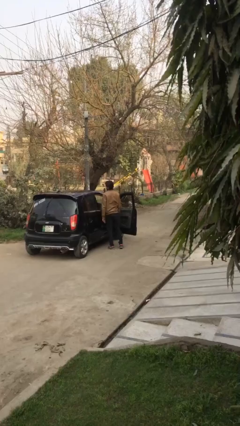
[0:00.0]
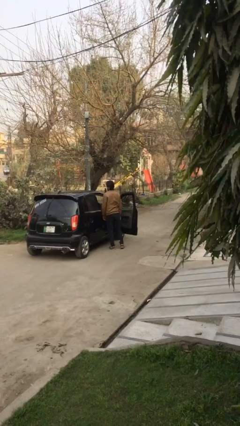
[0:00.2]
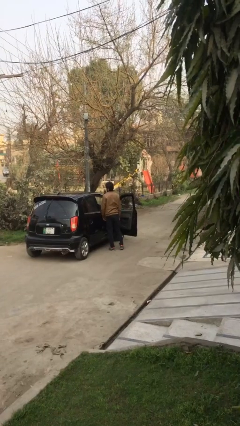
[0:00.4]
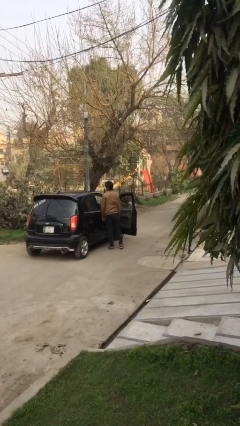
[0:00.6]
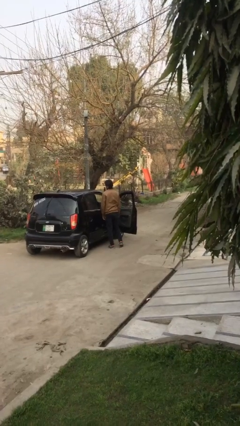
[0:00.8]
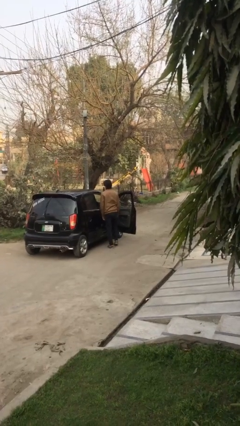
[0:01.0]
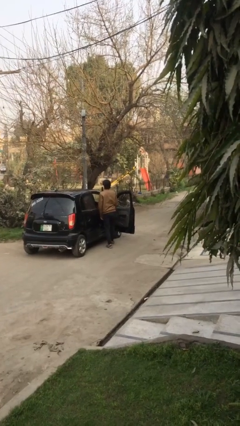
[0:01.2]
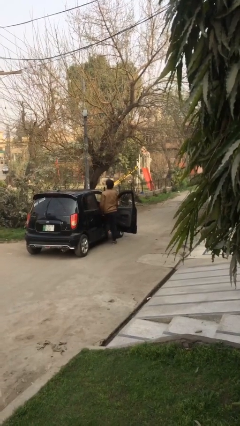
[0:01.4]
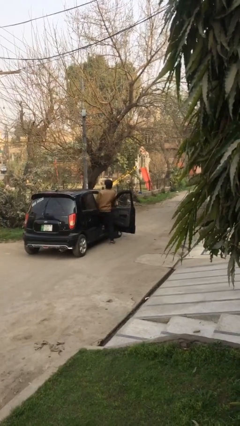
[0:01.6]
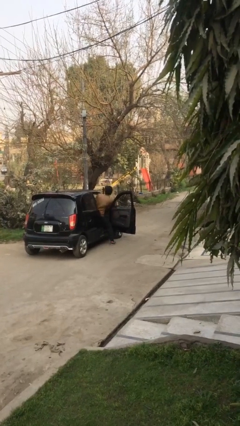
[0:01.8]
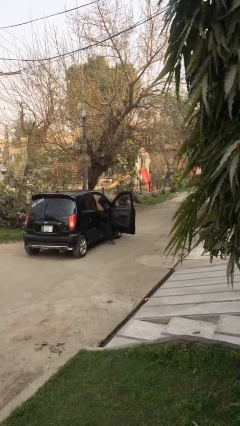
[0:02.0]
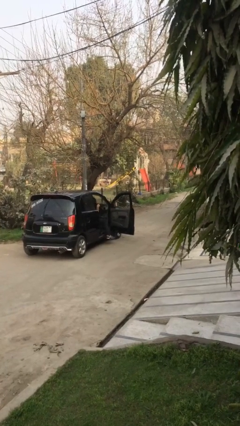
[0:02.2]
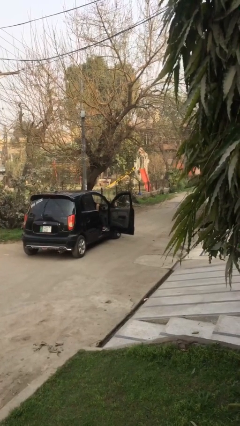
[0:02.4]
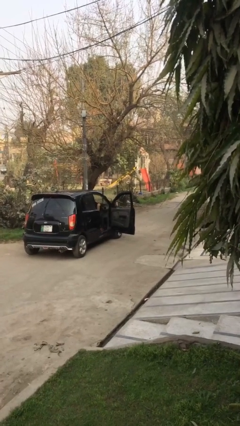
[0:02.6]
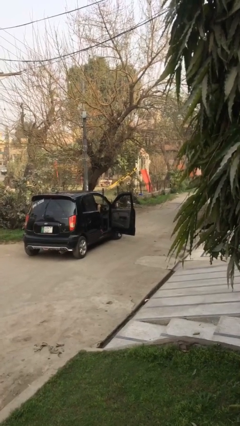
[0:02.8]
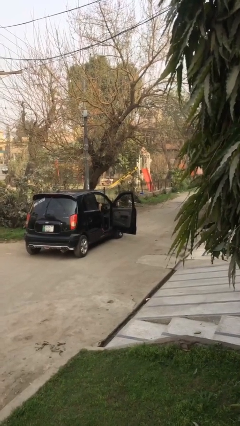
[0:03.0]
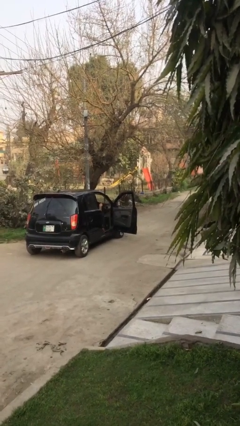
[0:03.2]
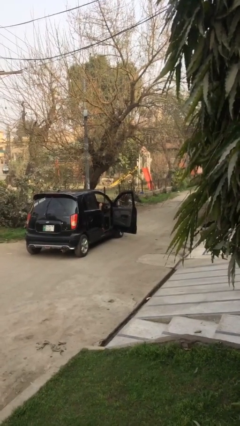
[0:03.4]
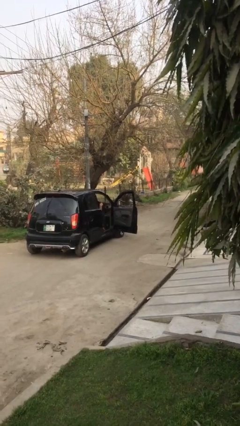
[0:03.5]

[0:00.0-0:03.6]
person enters car

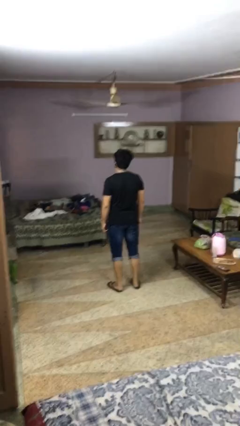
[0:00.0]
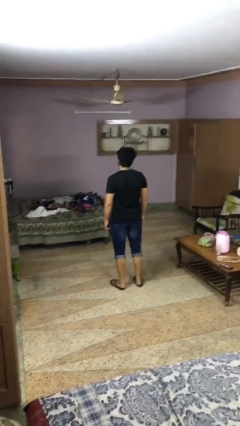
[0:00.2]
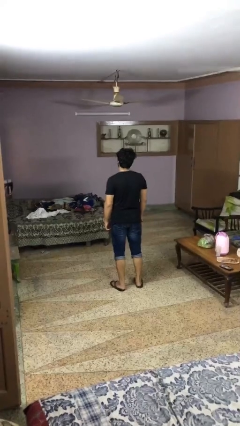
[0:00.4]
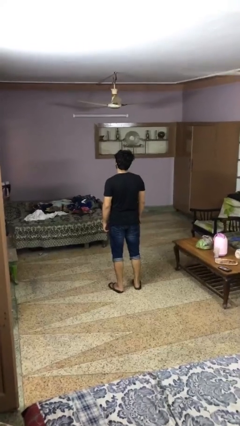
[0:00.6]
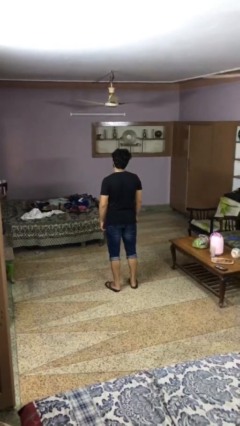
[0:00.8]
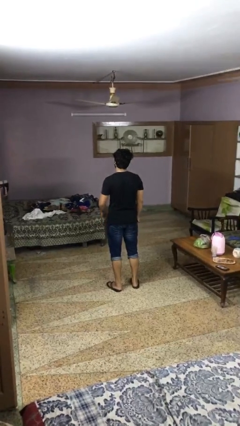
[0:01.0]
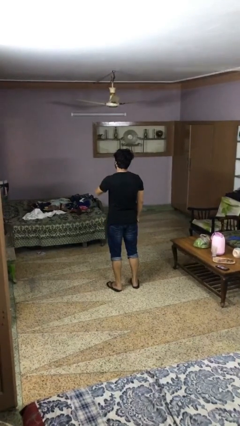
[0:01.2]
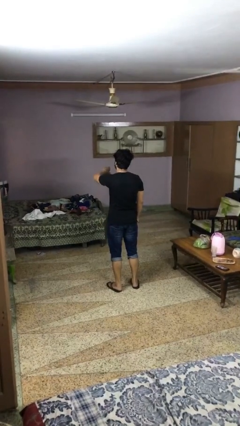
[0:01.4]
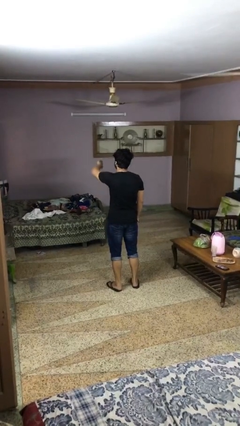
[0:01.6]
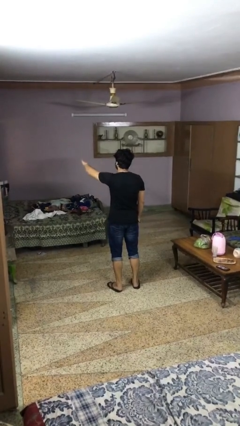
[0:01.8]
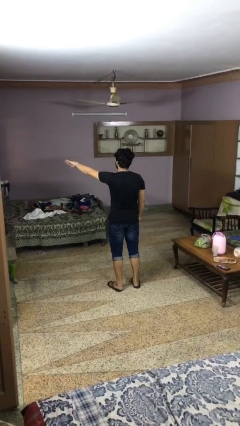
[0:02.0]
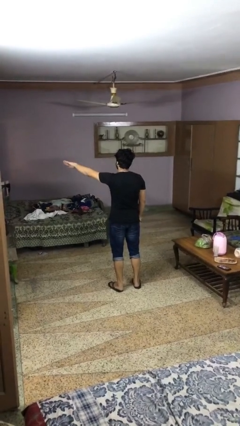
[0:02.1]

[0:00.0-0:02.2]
person gestures swipe left

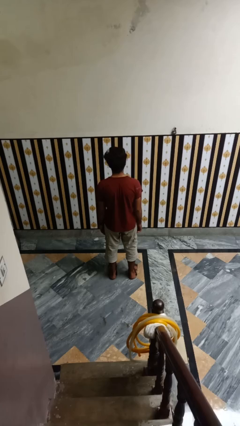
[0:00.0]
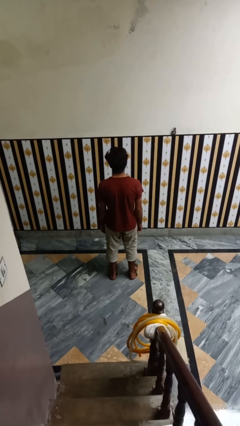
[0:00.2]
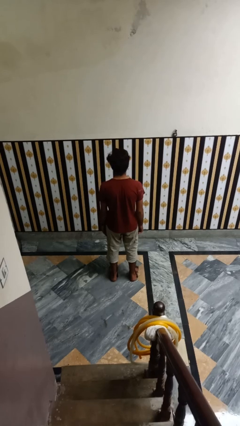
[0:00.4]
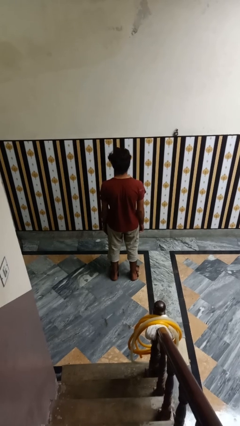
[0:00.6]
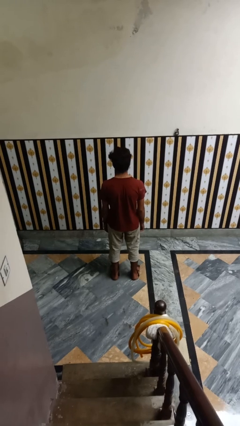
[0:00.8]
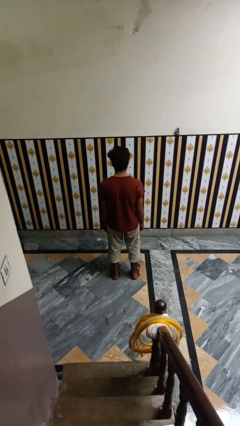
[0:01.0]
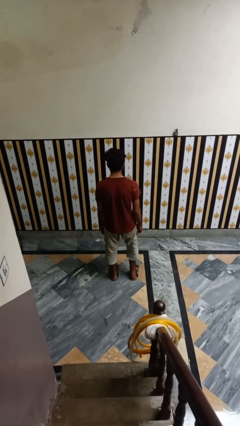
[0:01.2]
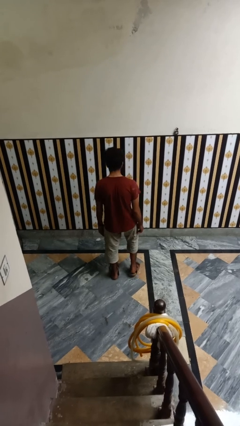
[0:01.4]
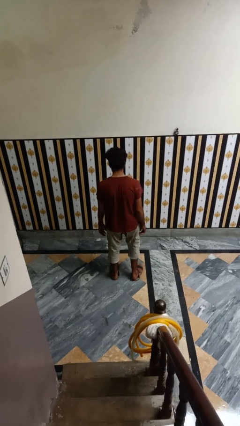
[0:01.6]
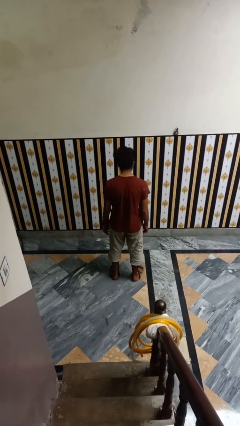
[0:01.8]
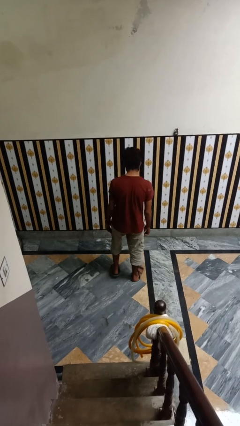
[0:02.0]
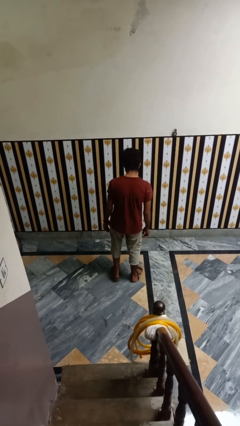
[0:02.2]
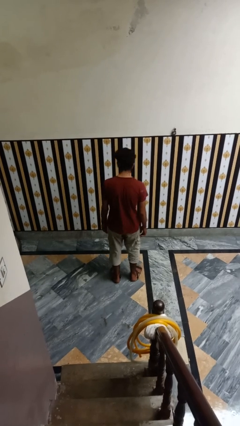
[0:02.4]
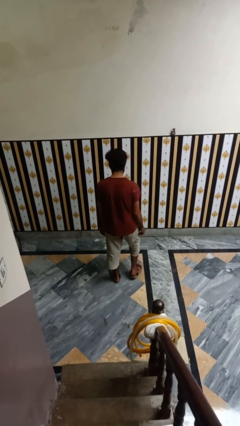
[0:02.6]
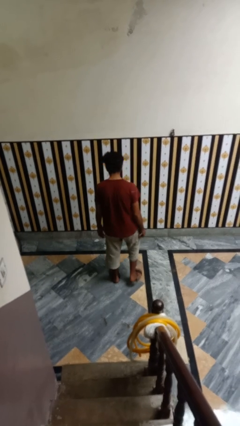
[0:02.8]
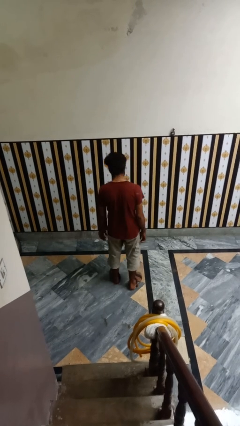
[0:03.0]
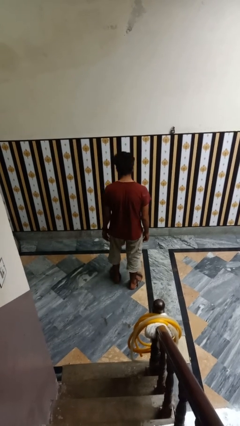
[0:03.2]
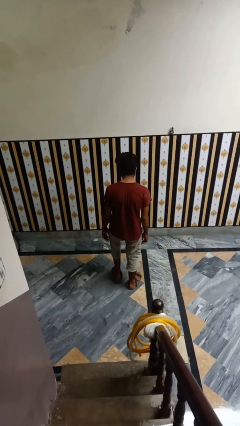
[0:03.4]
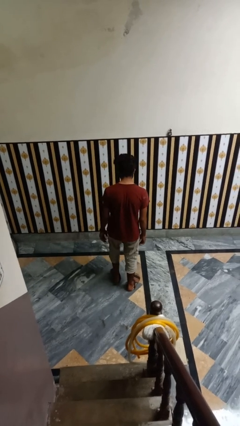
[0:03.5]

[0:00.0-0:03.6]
person walks tiptoe

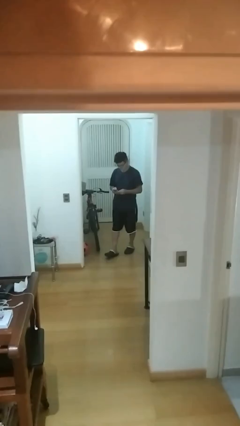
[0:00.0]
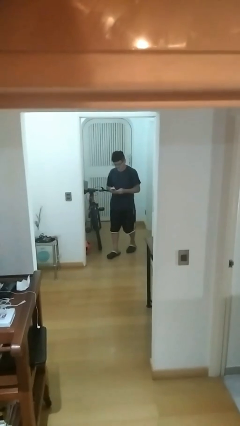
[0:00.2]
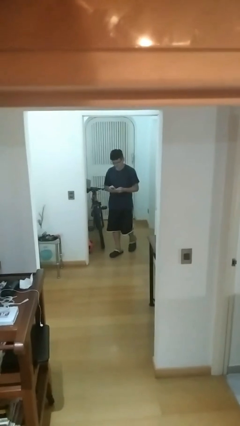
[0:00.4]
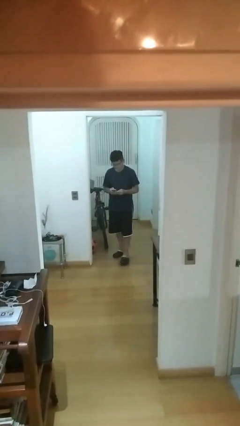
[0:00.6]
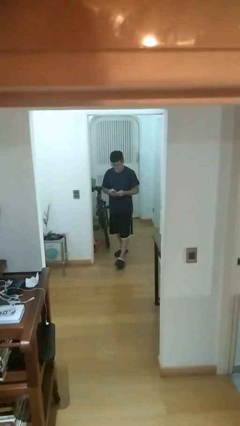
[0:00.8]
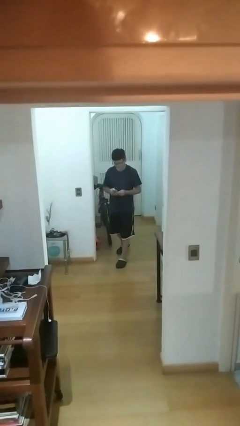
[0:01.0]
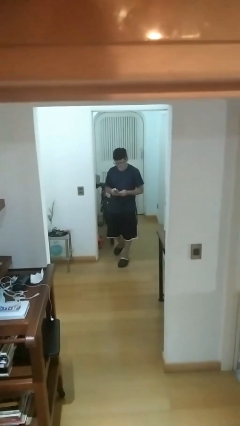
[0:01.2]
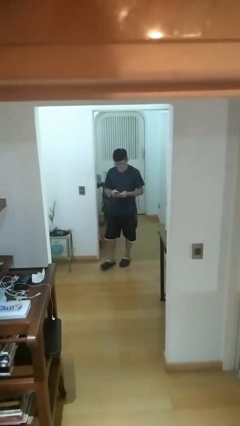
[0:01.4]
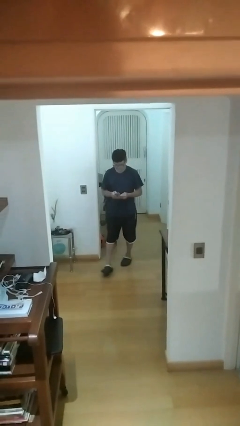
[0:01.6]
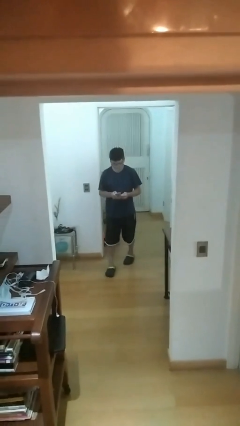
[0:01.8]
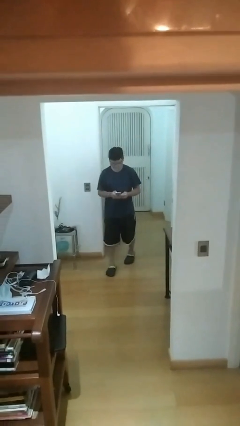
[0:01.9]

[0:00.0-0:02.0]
person enters scene through structure

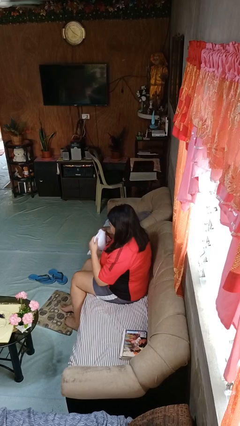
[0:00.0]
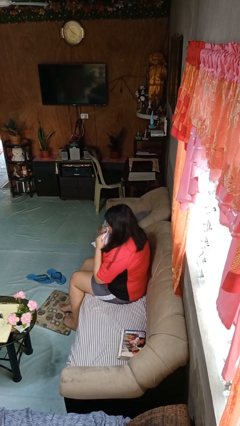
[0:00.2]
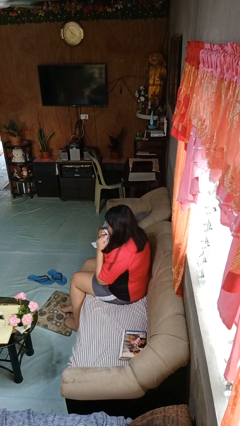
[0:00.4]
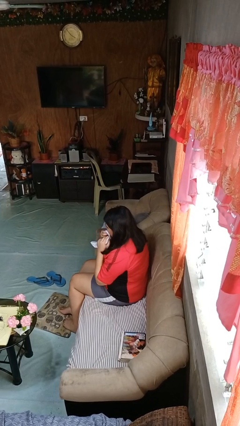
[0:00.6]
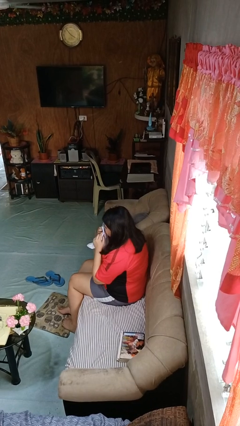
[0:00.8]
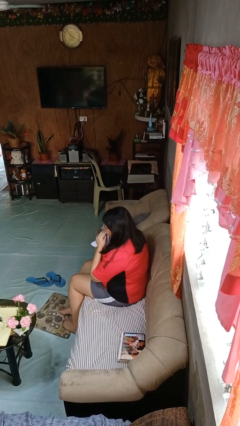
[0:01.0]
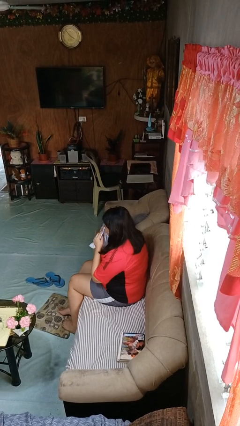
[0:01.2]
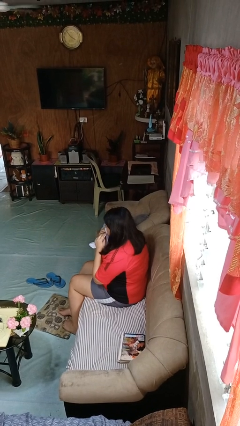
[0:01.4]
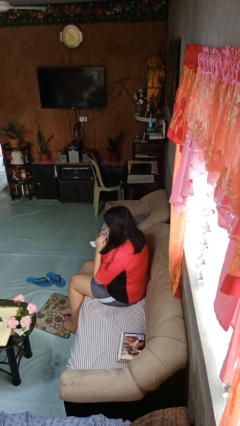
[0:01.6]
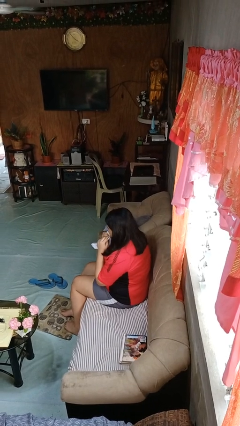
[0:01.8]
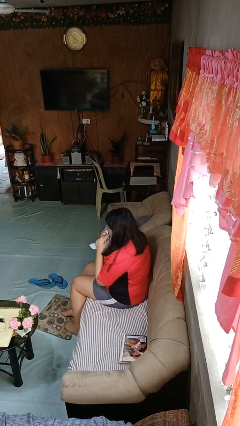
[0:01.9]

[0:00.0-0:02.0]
person wipes mouth with napkin

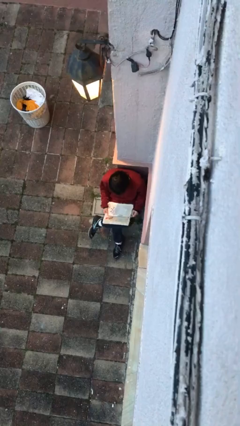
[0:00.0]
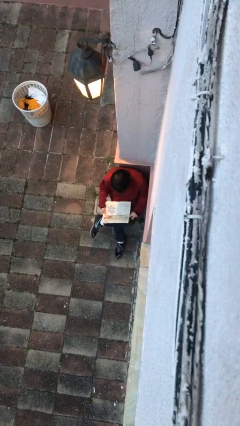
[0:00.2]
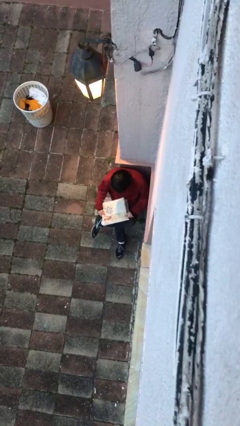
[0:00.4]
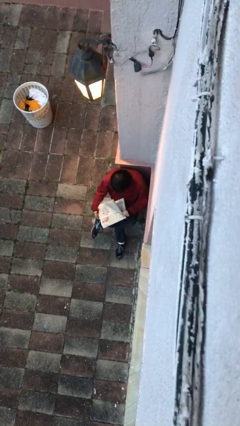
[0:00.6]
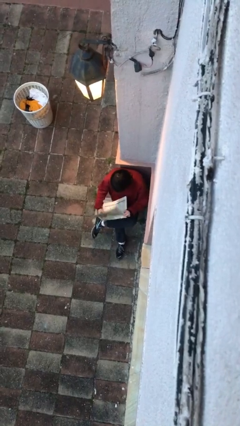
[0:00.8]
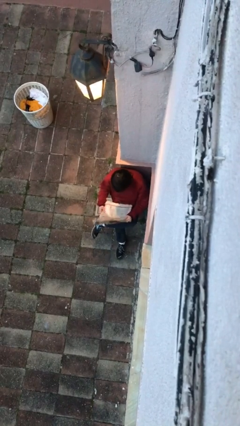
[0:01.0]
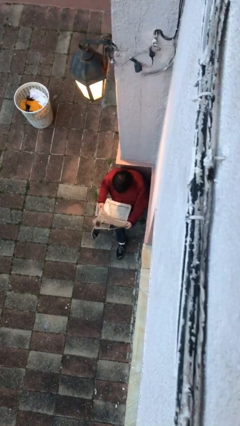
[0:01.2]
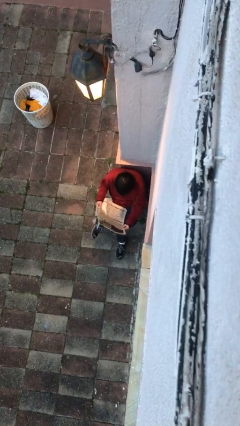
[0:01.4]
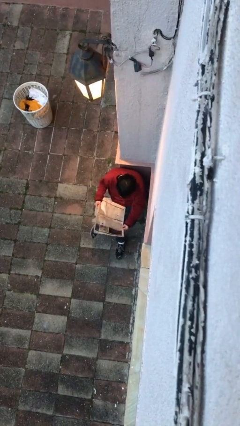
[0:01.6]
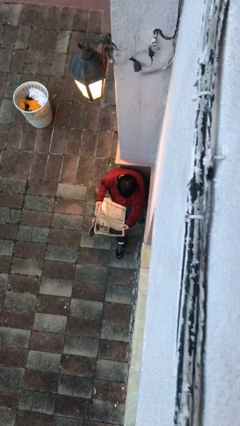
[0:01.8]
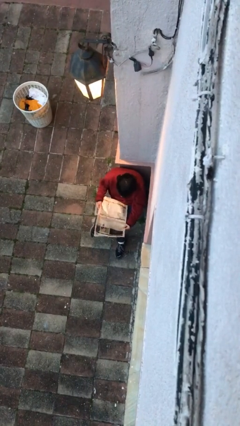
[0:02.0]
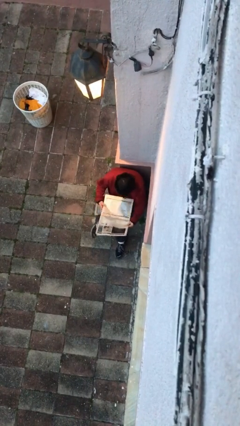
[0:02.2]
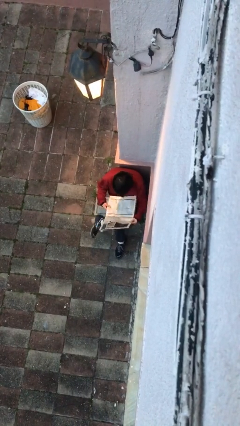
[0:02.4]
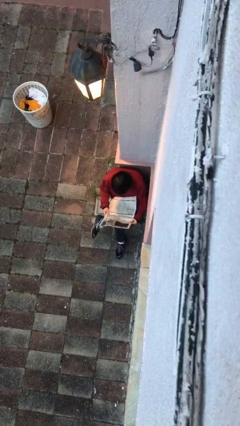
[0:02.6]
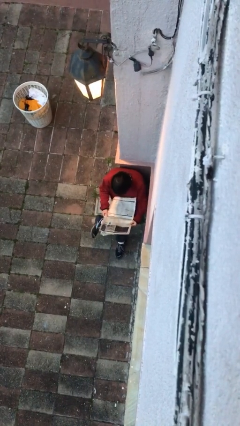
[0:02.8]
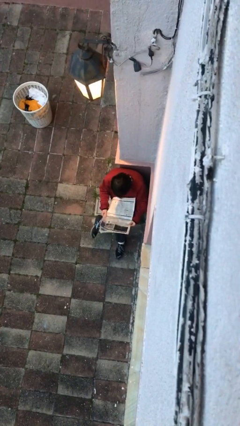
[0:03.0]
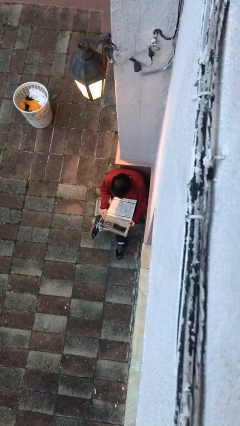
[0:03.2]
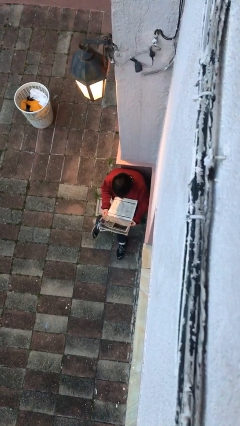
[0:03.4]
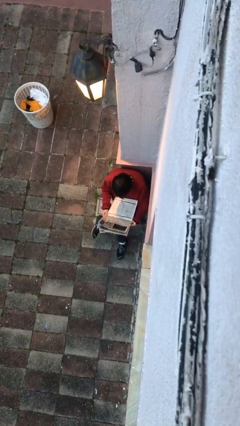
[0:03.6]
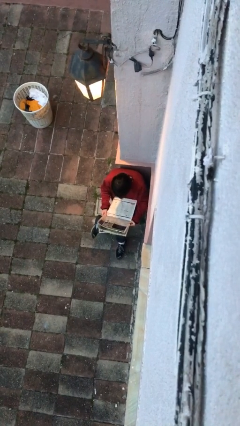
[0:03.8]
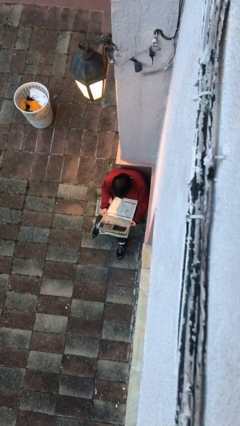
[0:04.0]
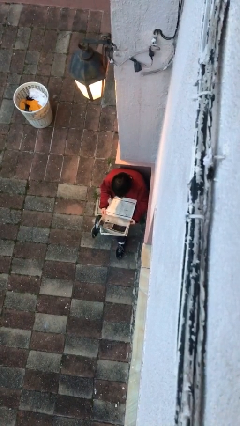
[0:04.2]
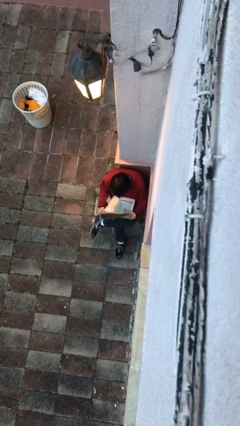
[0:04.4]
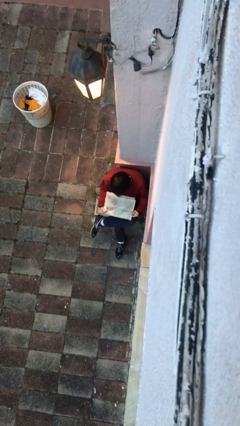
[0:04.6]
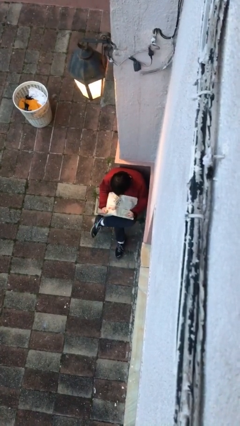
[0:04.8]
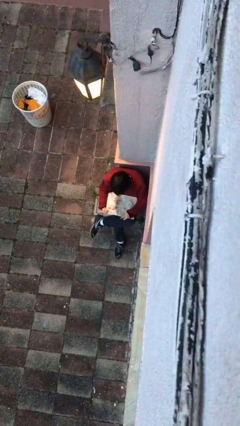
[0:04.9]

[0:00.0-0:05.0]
person reads newspaper
